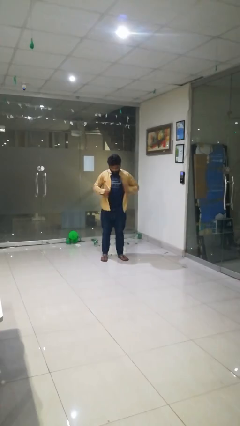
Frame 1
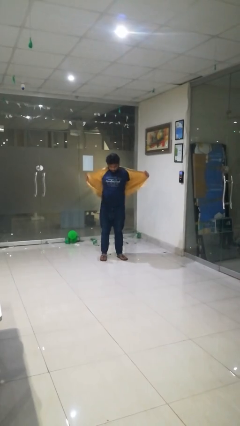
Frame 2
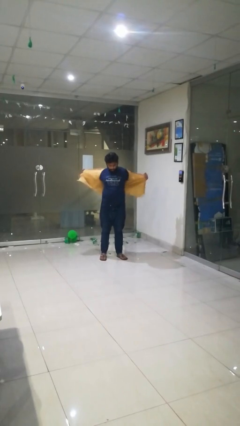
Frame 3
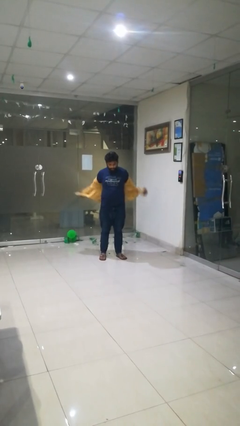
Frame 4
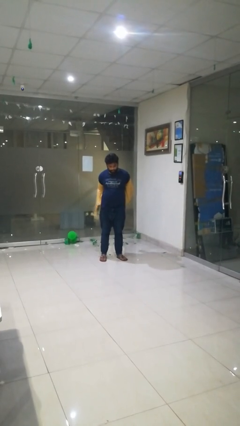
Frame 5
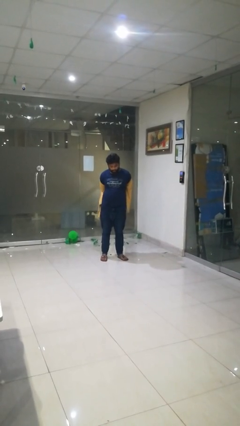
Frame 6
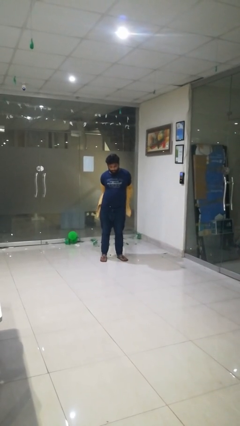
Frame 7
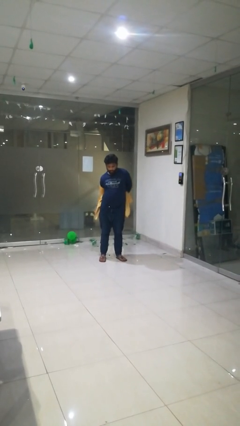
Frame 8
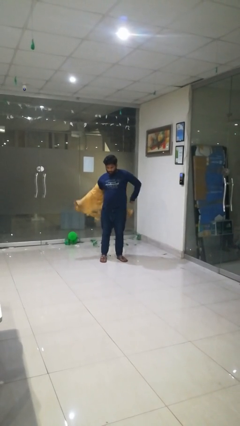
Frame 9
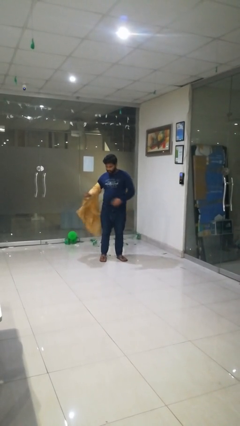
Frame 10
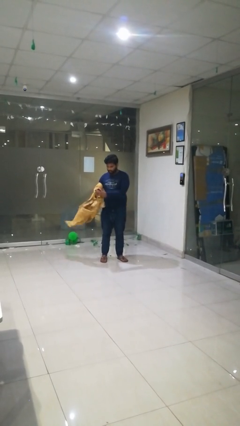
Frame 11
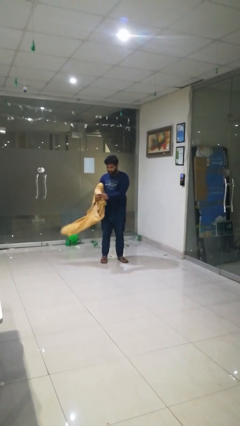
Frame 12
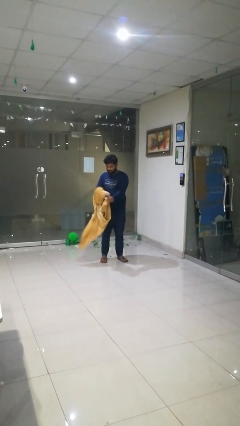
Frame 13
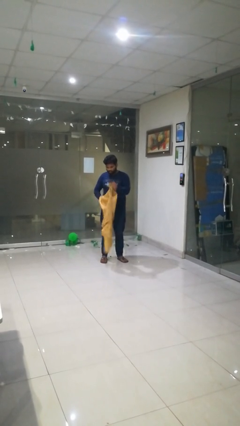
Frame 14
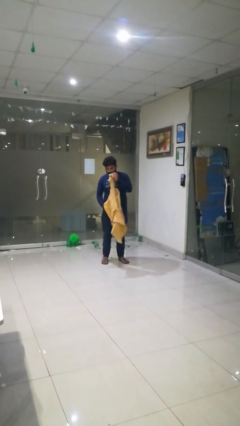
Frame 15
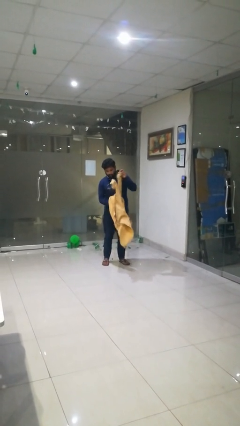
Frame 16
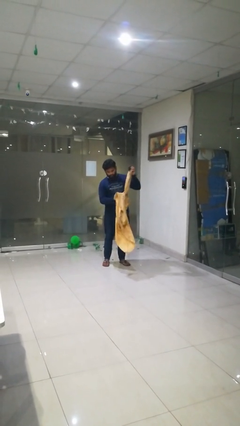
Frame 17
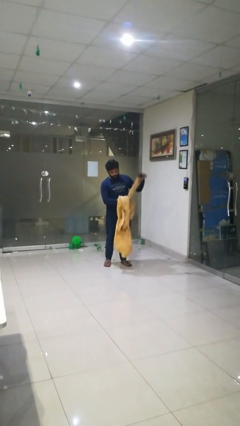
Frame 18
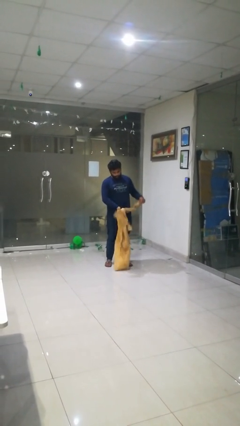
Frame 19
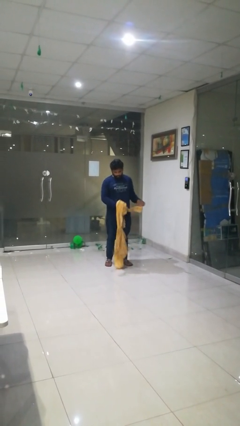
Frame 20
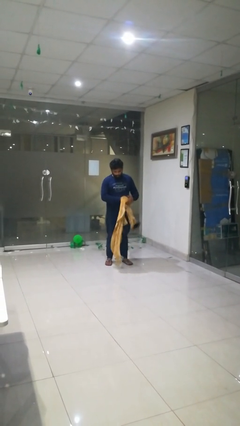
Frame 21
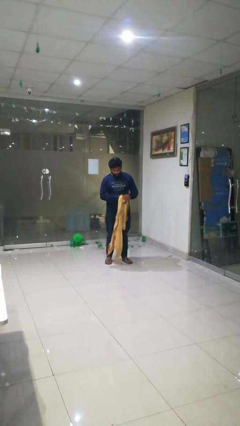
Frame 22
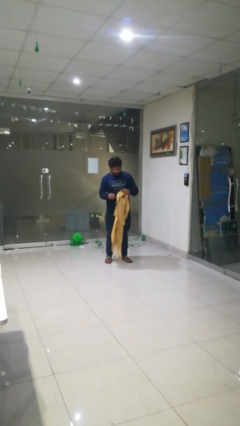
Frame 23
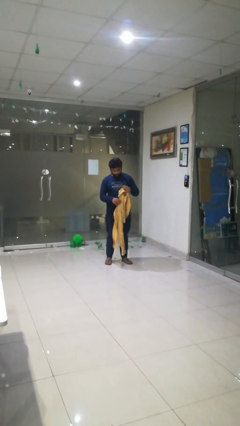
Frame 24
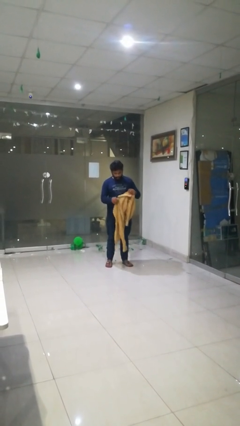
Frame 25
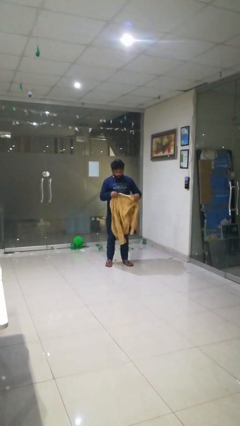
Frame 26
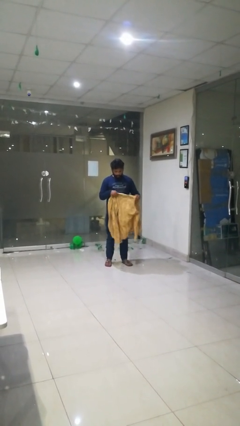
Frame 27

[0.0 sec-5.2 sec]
person takes off shirt

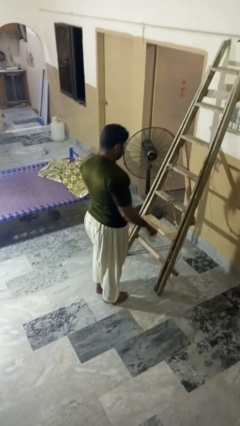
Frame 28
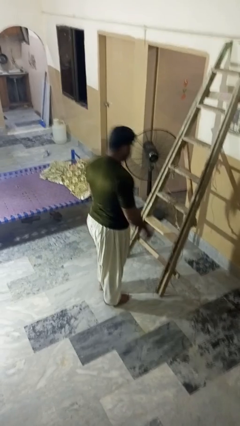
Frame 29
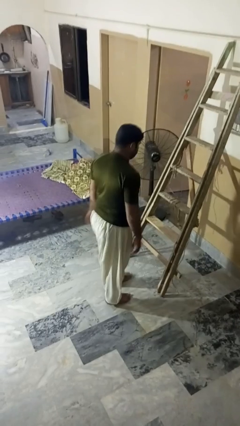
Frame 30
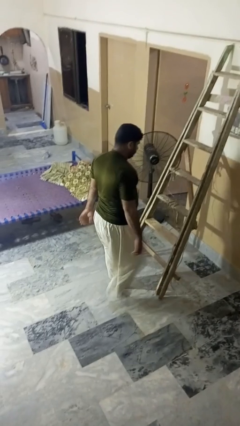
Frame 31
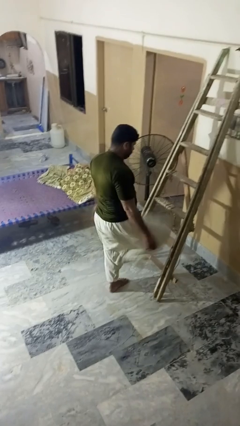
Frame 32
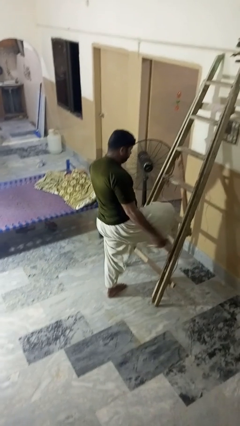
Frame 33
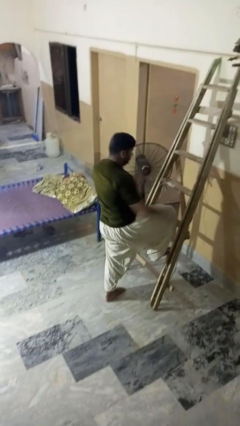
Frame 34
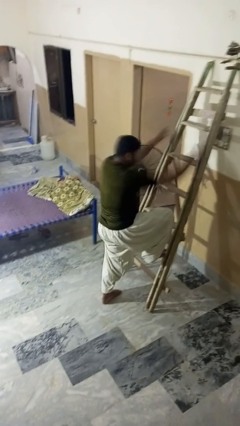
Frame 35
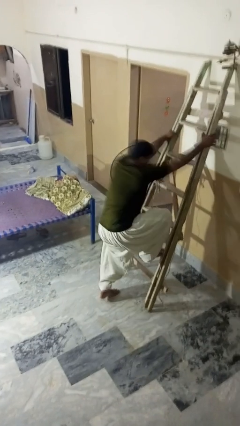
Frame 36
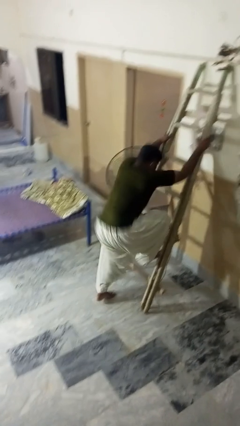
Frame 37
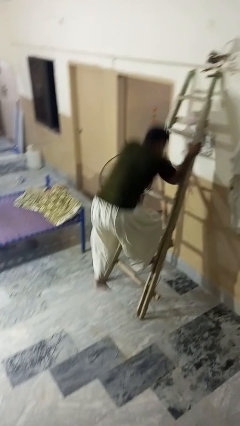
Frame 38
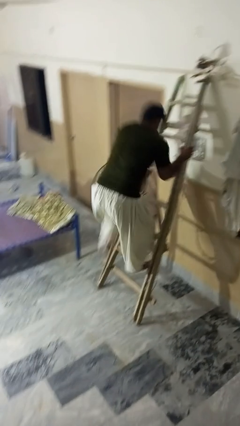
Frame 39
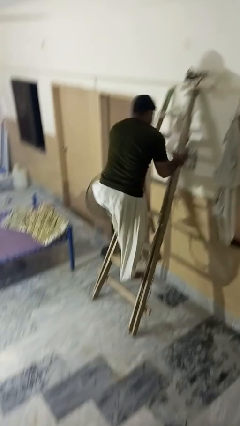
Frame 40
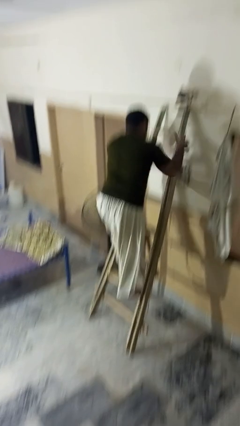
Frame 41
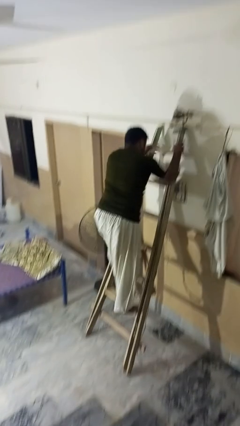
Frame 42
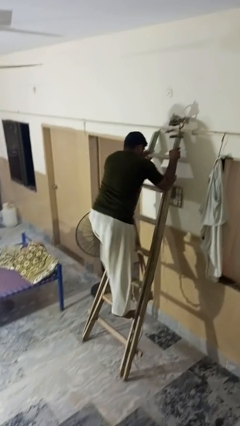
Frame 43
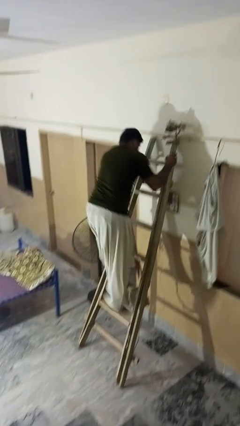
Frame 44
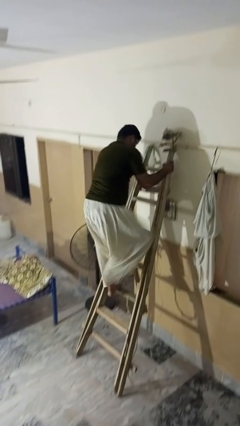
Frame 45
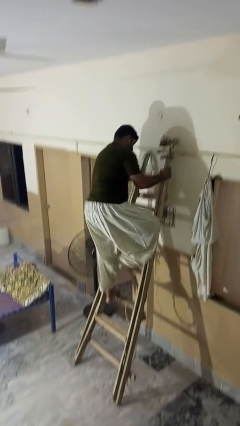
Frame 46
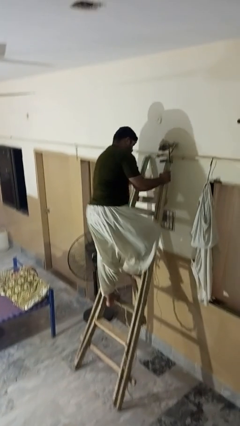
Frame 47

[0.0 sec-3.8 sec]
person climbs up ladder

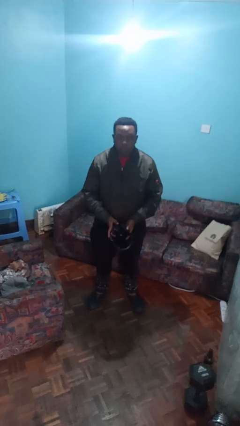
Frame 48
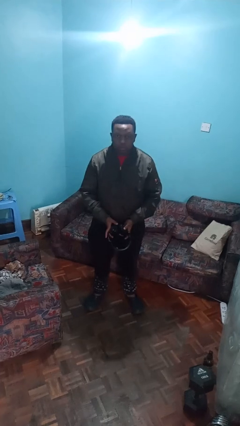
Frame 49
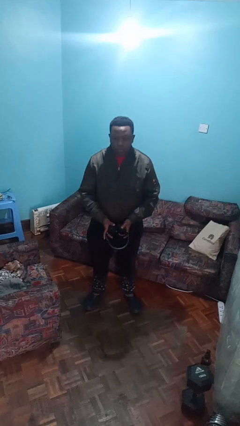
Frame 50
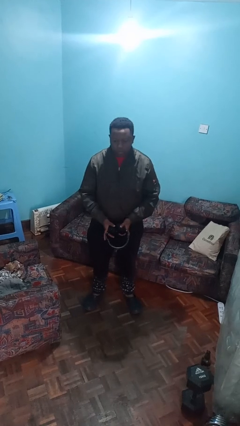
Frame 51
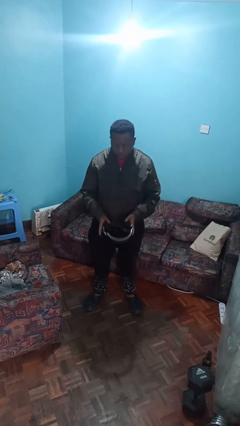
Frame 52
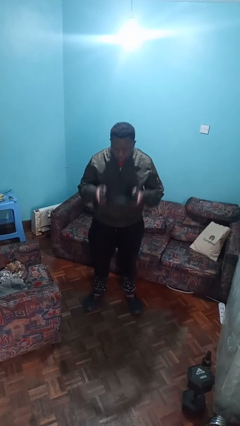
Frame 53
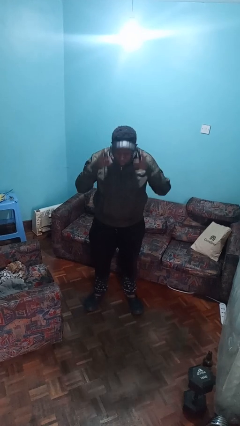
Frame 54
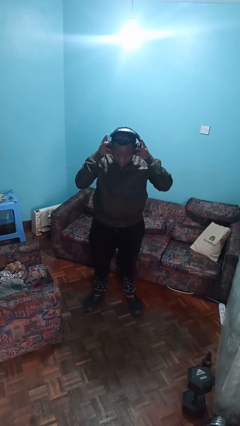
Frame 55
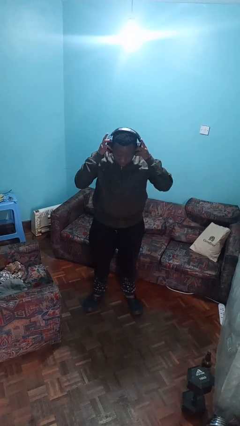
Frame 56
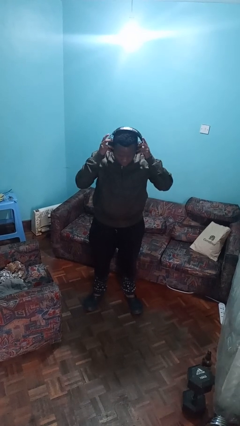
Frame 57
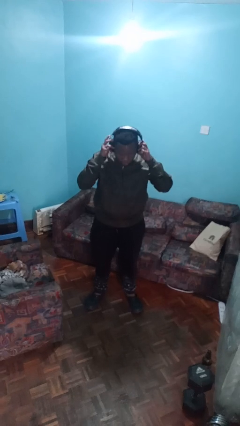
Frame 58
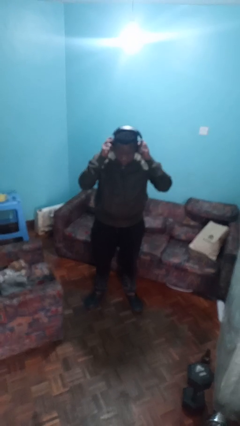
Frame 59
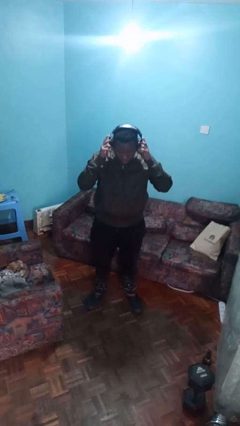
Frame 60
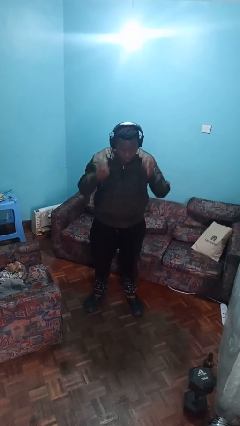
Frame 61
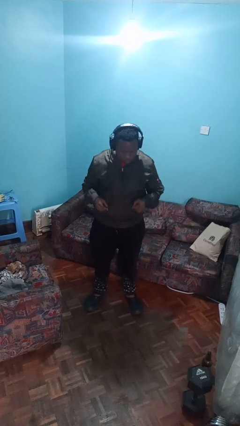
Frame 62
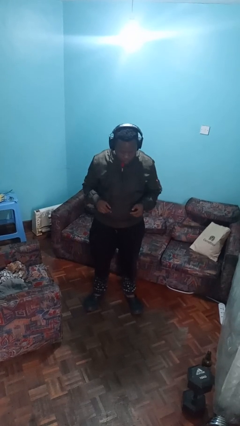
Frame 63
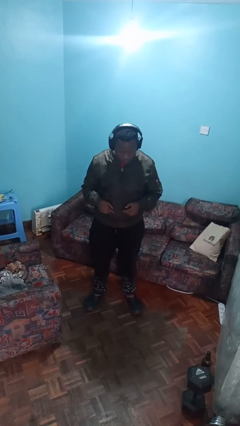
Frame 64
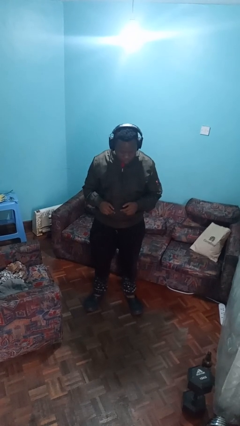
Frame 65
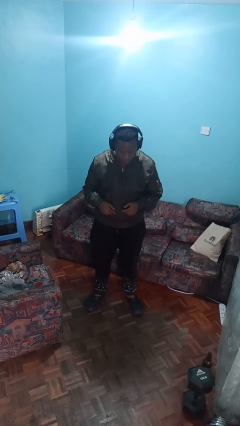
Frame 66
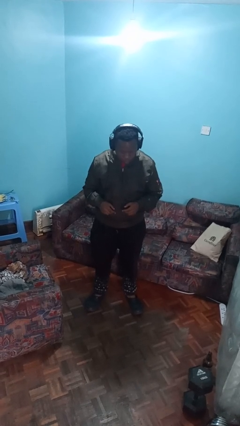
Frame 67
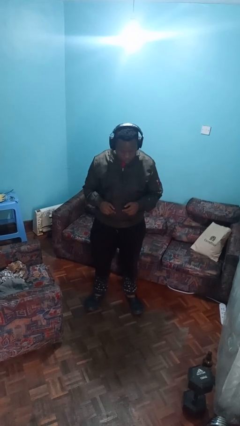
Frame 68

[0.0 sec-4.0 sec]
person puts on headphones

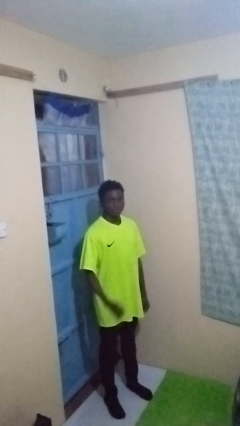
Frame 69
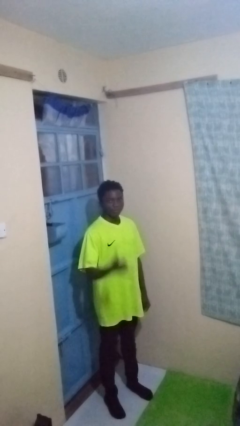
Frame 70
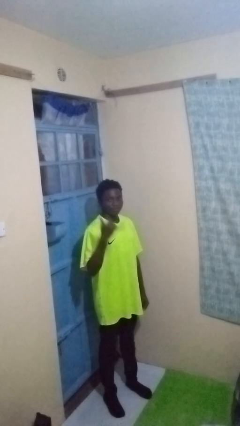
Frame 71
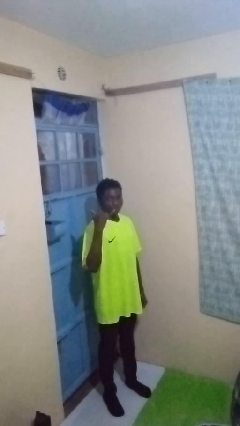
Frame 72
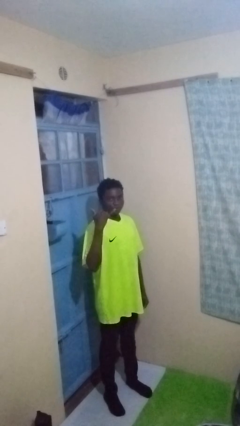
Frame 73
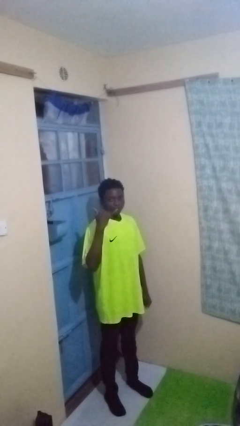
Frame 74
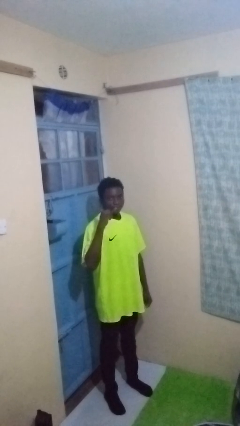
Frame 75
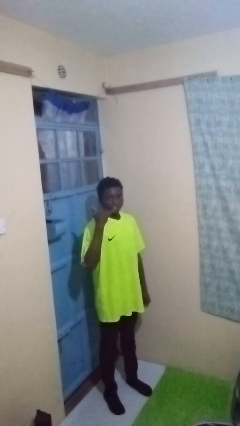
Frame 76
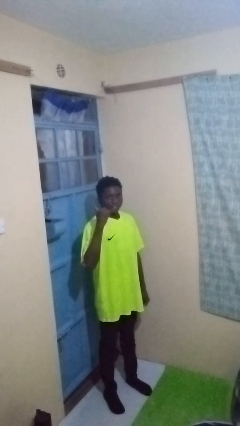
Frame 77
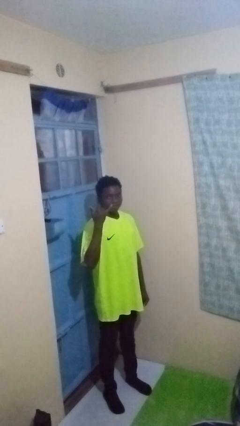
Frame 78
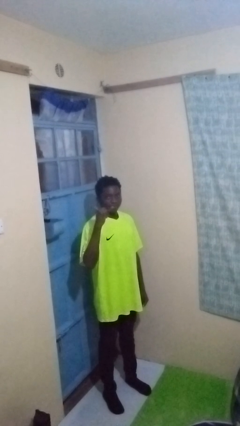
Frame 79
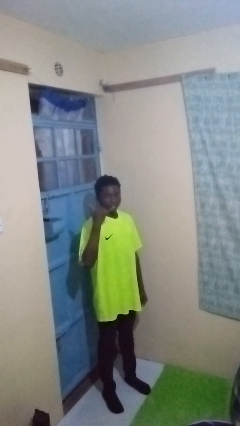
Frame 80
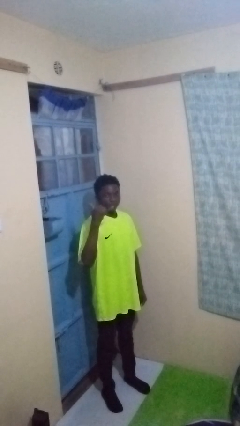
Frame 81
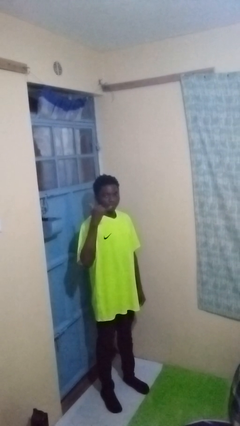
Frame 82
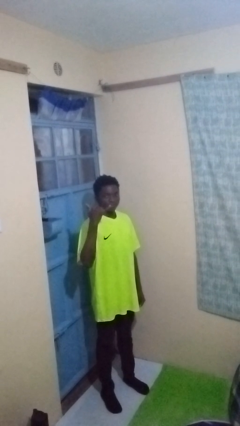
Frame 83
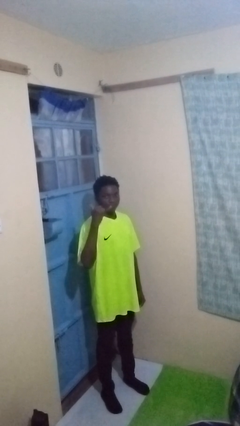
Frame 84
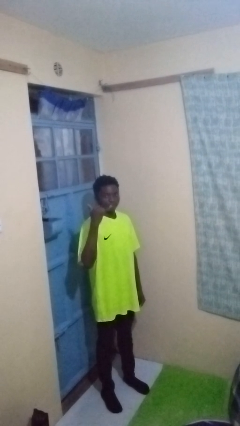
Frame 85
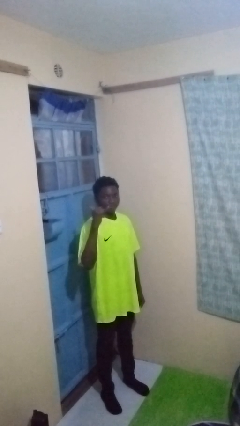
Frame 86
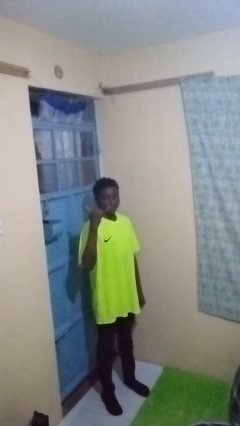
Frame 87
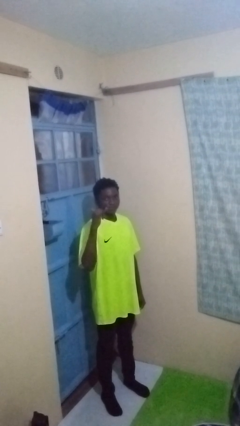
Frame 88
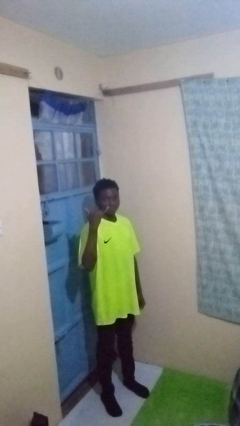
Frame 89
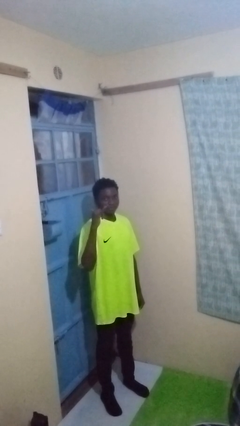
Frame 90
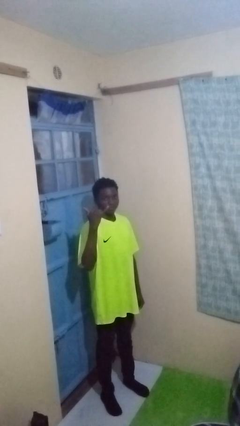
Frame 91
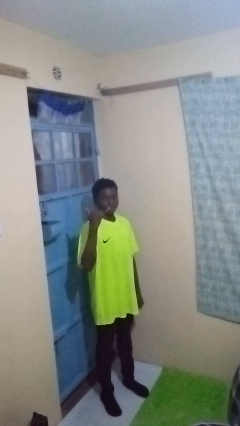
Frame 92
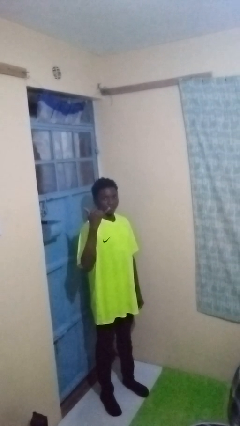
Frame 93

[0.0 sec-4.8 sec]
person gestures hang loose
